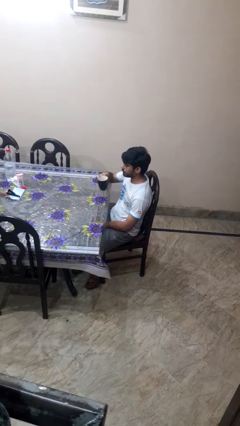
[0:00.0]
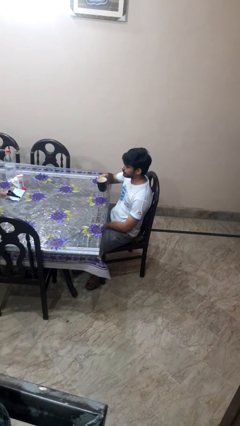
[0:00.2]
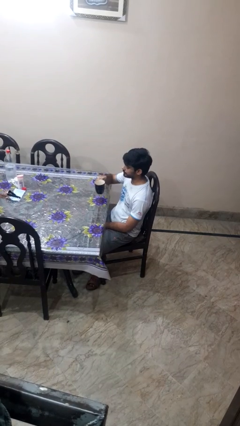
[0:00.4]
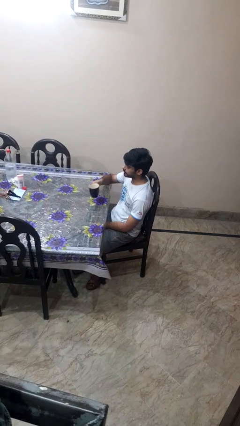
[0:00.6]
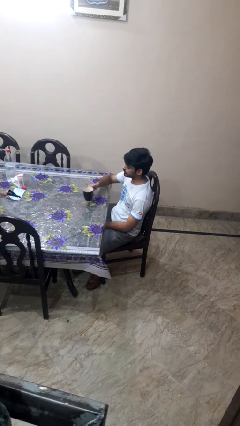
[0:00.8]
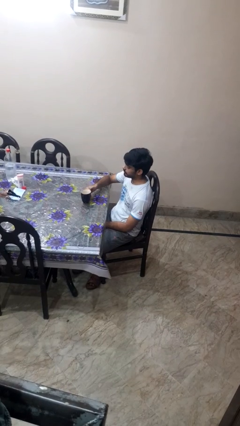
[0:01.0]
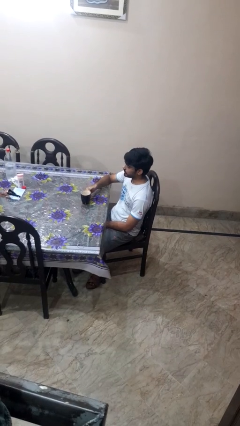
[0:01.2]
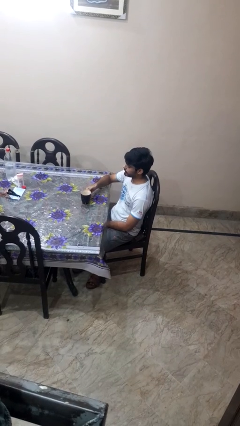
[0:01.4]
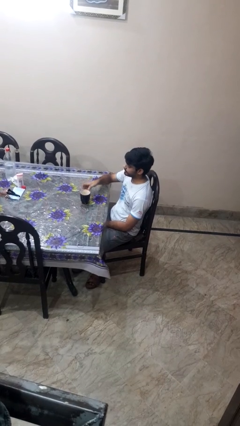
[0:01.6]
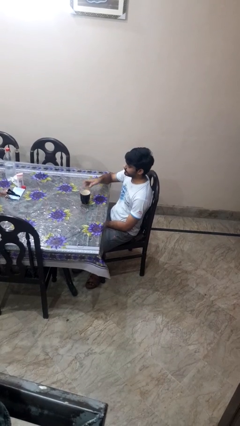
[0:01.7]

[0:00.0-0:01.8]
person puts down object on table

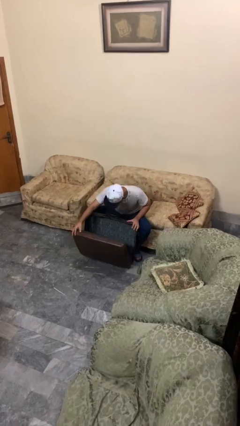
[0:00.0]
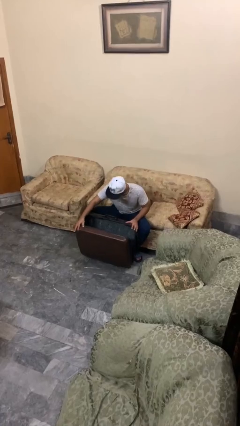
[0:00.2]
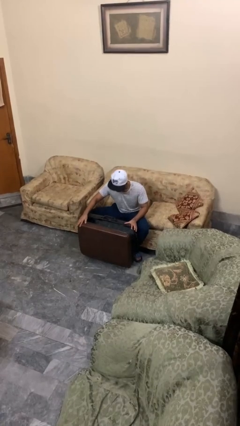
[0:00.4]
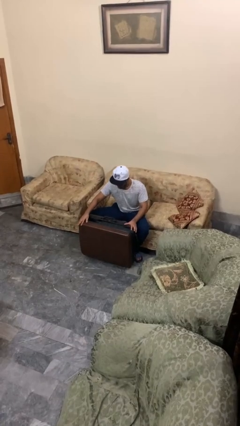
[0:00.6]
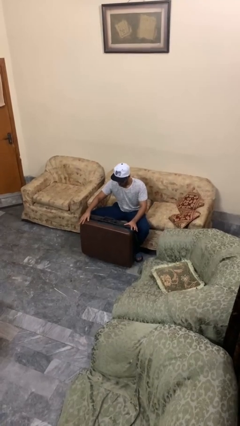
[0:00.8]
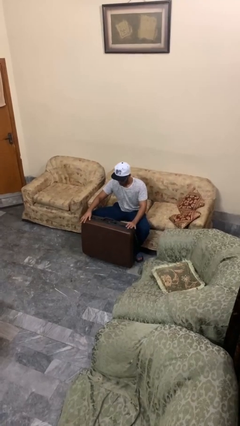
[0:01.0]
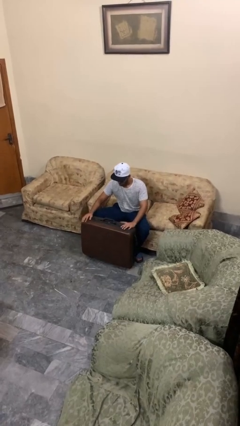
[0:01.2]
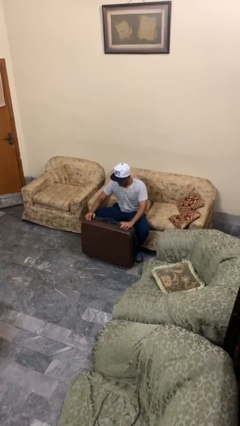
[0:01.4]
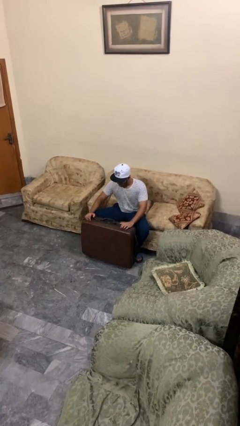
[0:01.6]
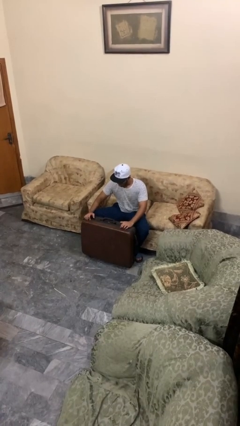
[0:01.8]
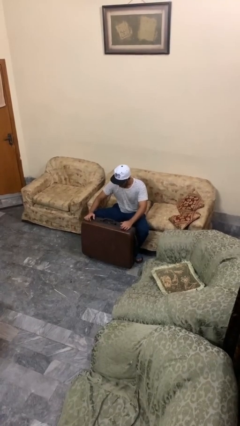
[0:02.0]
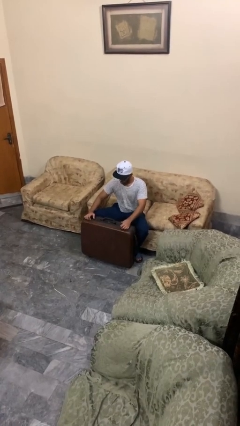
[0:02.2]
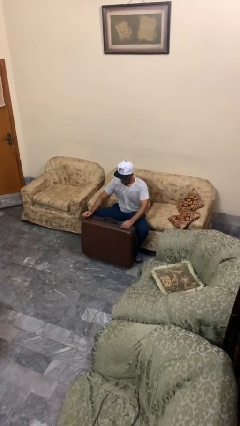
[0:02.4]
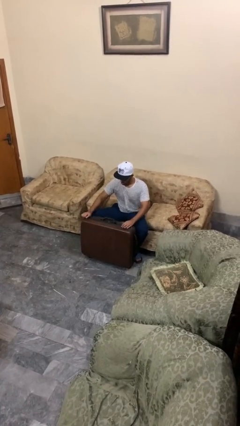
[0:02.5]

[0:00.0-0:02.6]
person closes suitcase

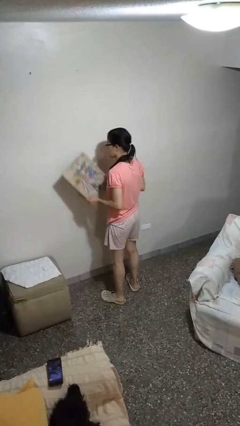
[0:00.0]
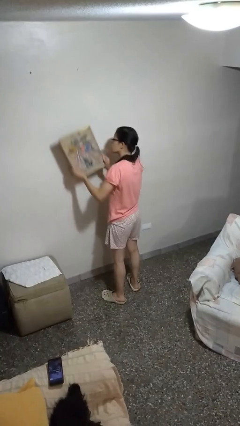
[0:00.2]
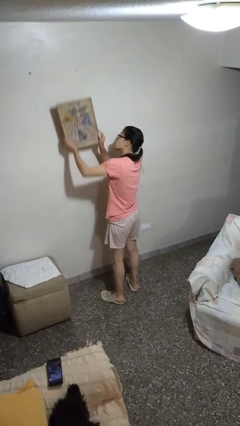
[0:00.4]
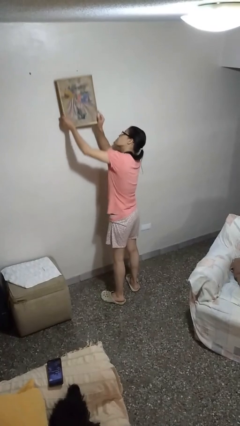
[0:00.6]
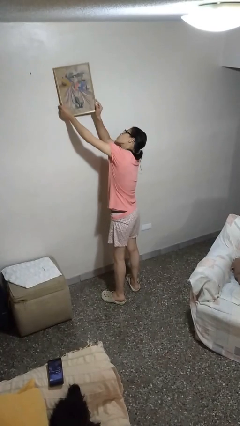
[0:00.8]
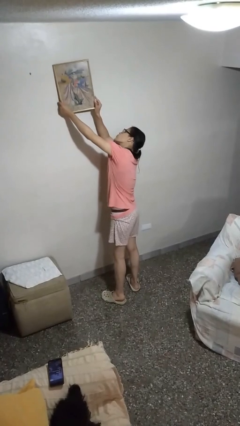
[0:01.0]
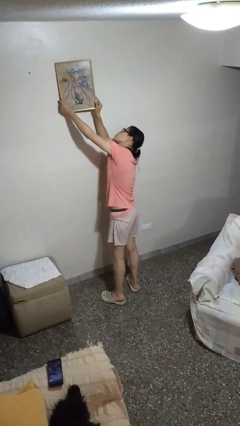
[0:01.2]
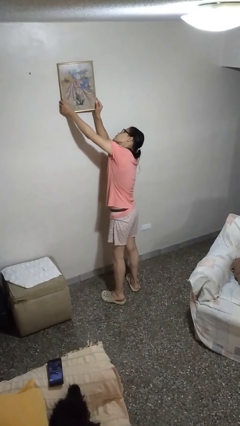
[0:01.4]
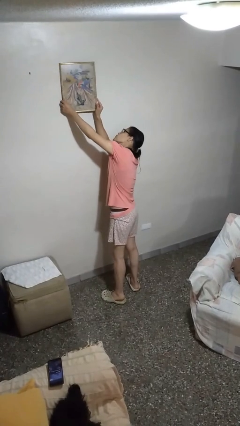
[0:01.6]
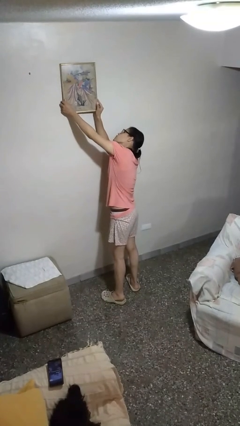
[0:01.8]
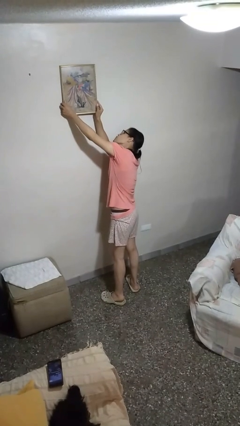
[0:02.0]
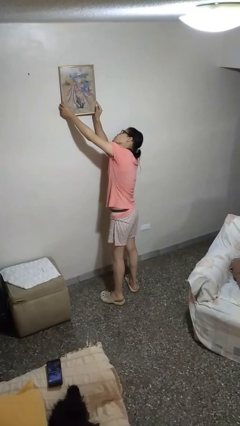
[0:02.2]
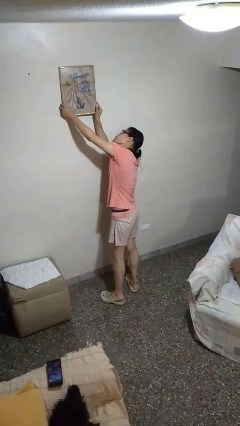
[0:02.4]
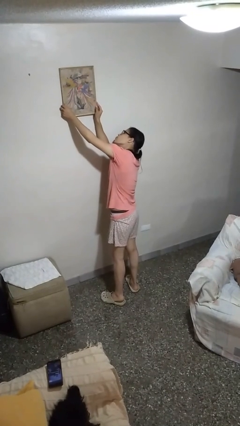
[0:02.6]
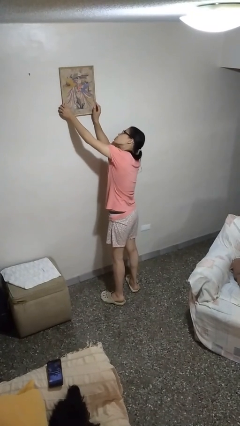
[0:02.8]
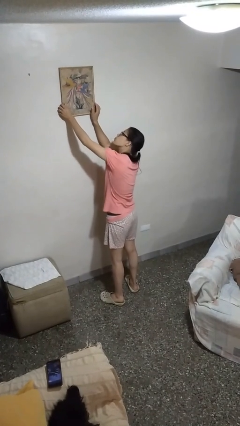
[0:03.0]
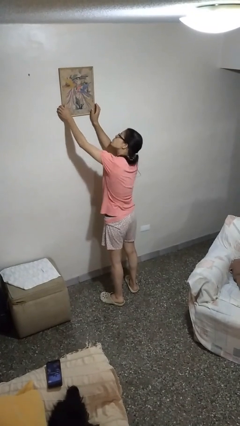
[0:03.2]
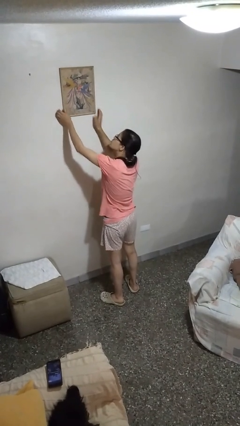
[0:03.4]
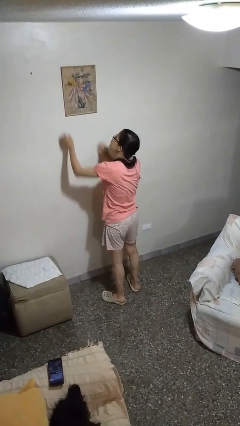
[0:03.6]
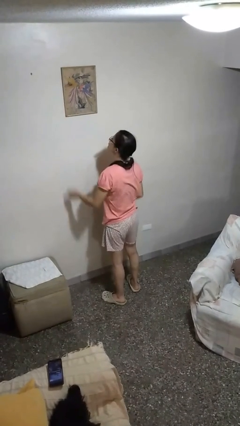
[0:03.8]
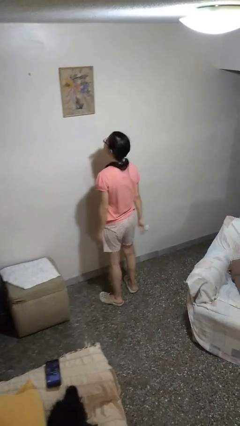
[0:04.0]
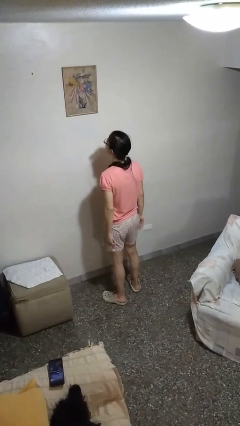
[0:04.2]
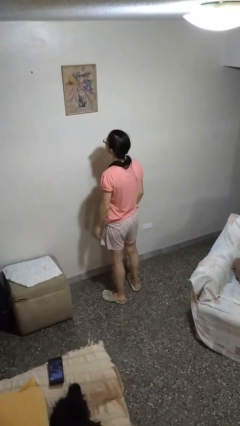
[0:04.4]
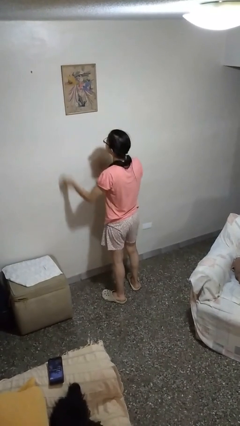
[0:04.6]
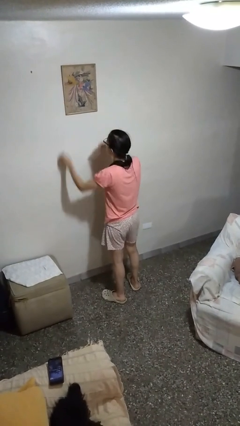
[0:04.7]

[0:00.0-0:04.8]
person puts up picture frame

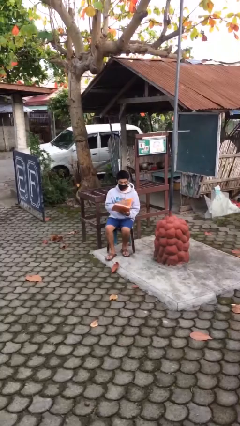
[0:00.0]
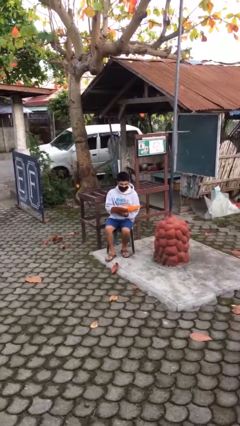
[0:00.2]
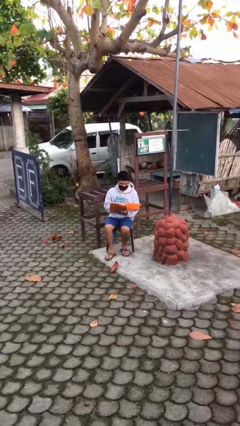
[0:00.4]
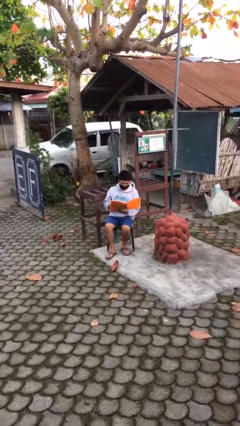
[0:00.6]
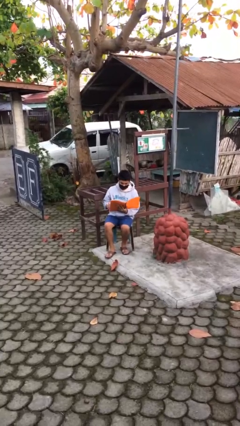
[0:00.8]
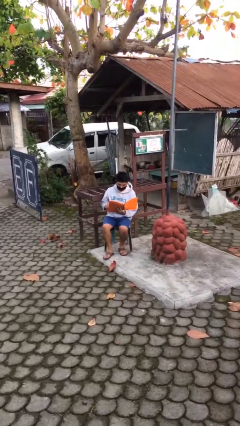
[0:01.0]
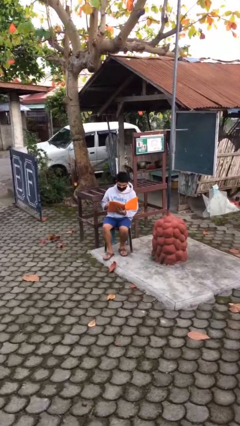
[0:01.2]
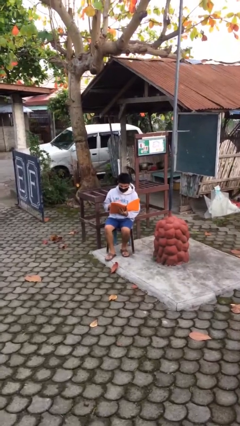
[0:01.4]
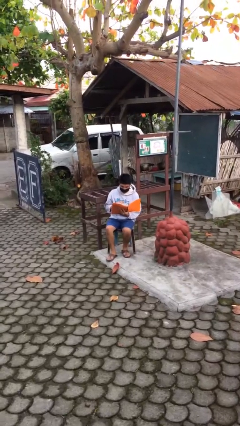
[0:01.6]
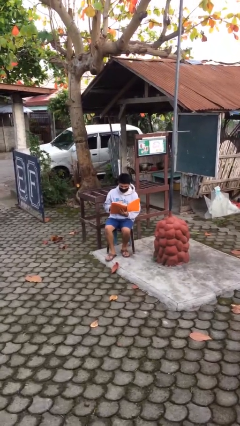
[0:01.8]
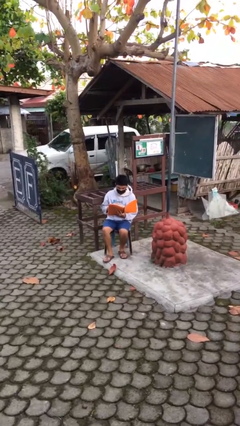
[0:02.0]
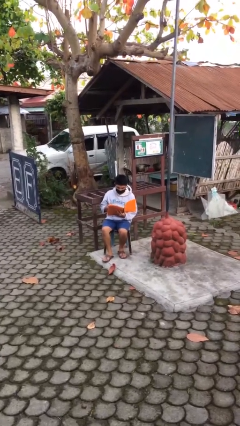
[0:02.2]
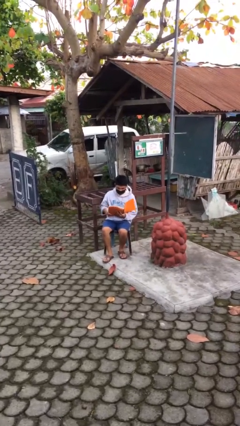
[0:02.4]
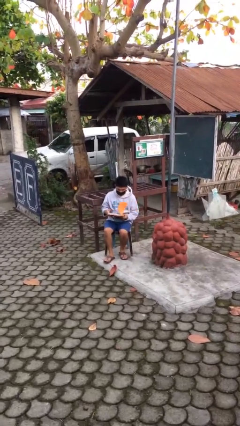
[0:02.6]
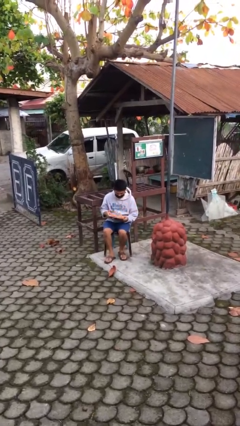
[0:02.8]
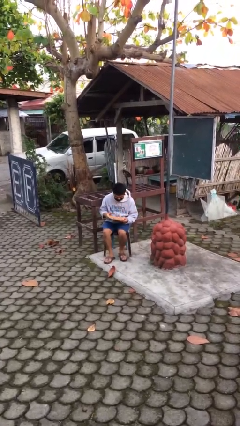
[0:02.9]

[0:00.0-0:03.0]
person reads document

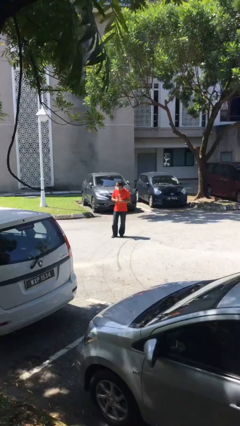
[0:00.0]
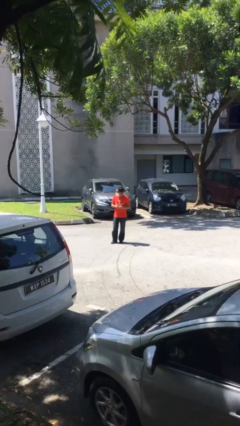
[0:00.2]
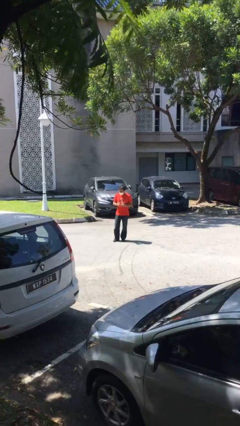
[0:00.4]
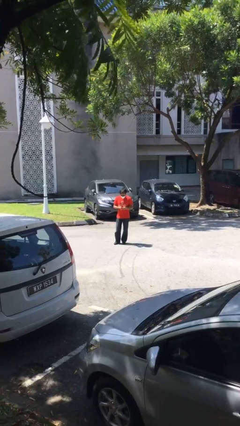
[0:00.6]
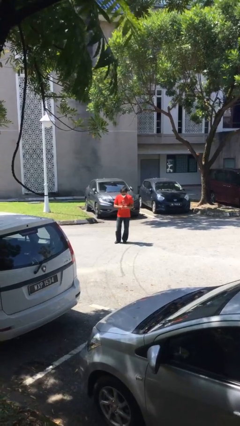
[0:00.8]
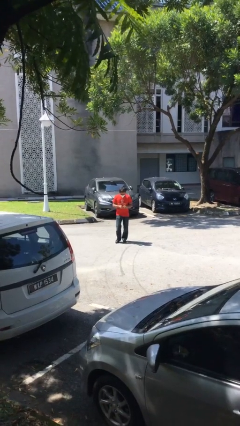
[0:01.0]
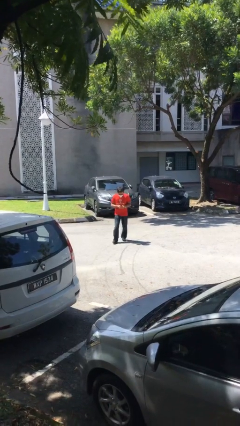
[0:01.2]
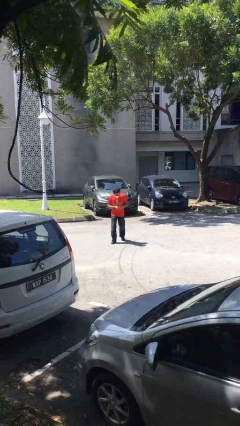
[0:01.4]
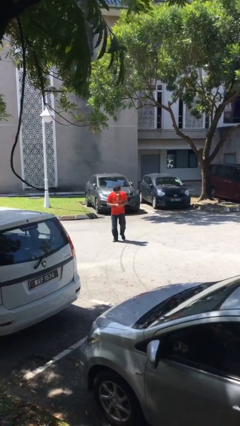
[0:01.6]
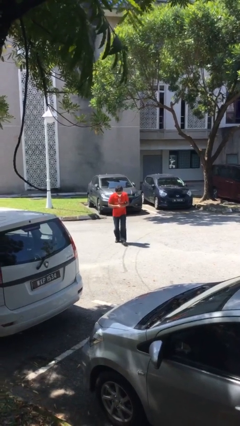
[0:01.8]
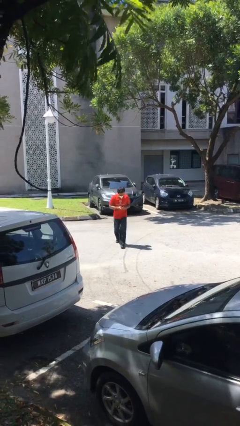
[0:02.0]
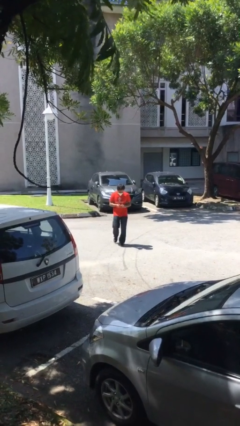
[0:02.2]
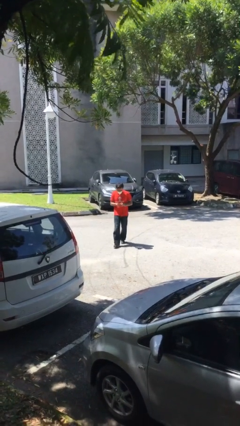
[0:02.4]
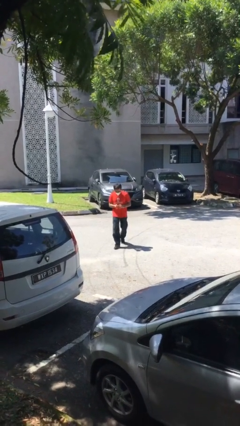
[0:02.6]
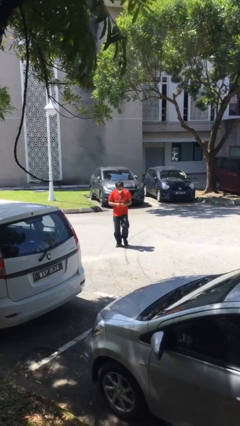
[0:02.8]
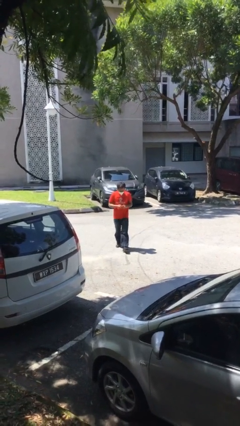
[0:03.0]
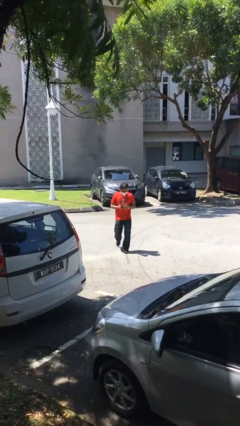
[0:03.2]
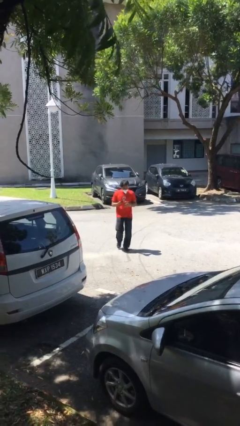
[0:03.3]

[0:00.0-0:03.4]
person texts on phone

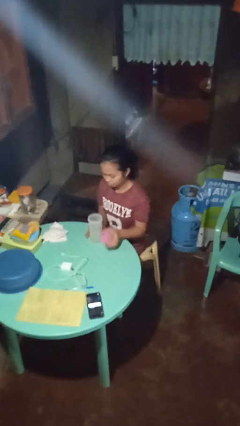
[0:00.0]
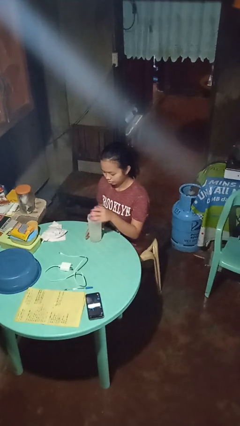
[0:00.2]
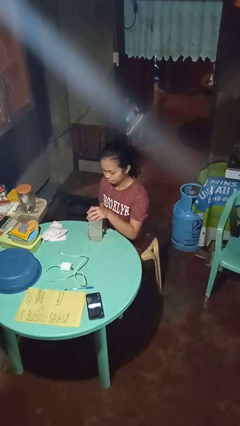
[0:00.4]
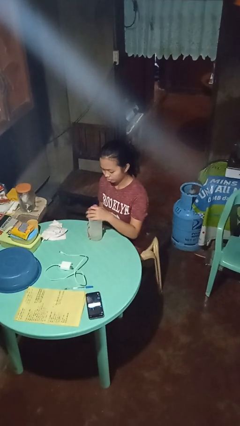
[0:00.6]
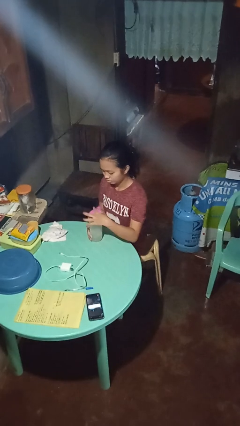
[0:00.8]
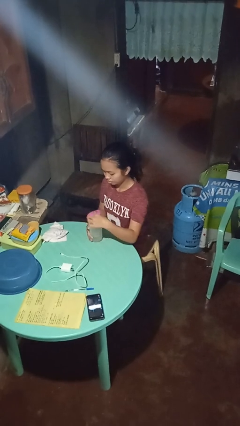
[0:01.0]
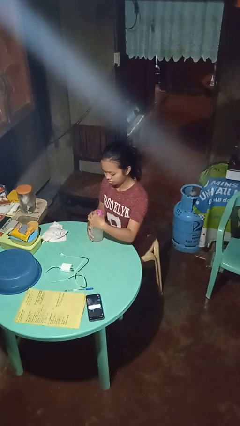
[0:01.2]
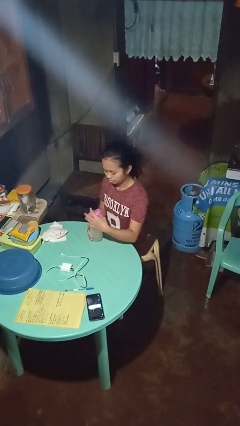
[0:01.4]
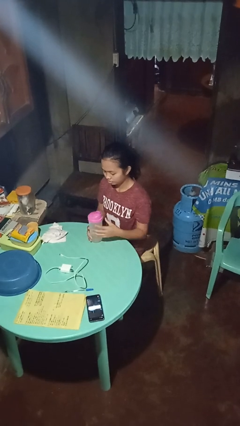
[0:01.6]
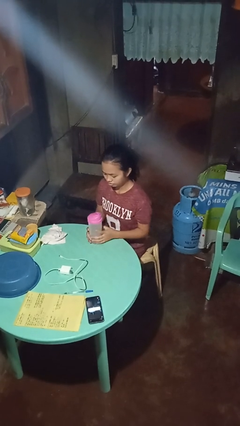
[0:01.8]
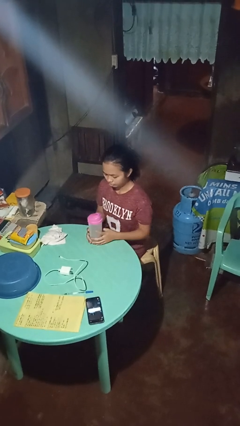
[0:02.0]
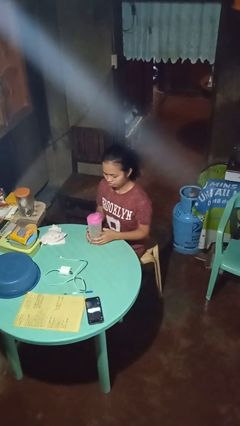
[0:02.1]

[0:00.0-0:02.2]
person screws lid to bottle
